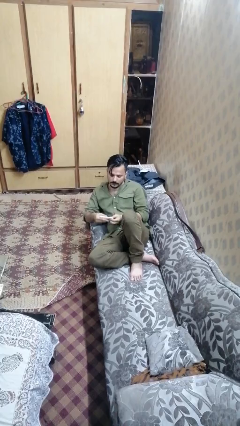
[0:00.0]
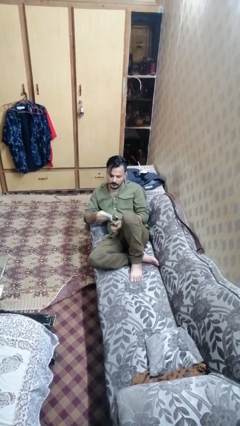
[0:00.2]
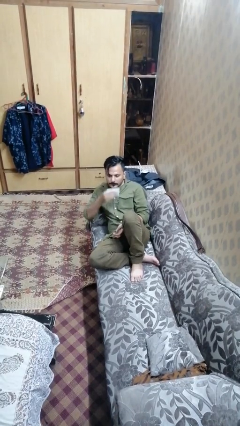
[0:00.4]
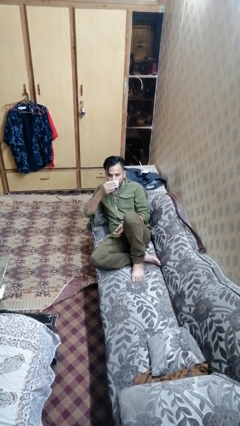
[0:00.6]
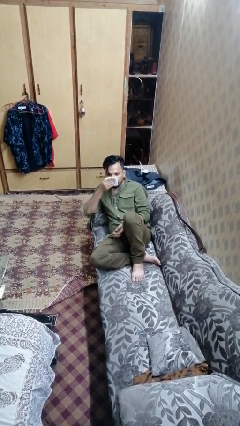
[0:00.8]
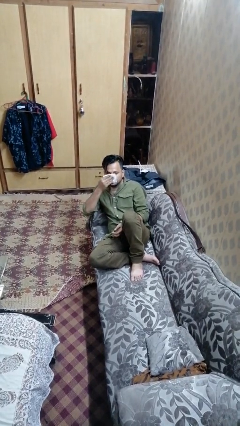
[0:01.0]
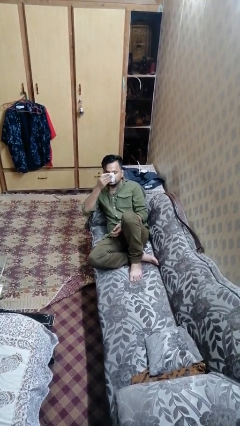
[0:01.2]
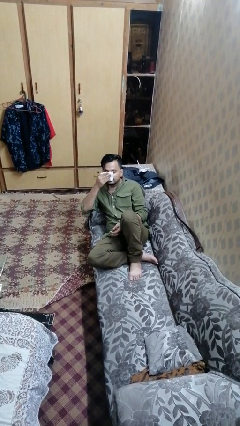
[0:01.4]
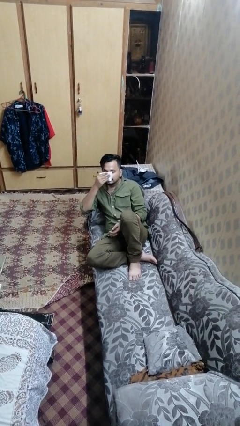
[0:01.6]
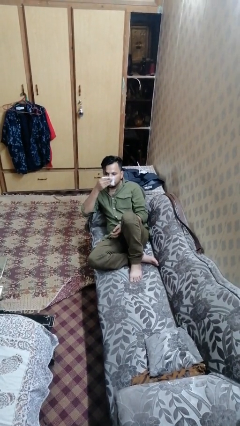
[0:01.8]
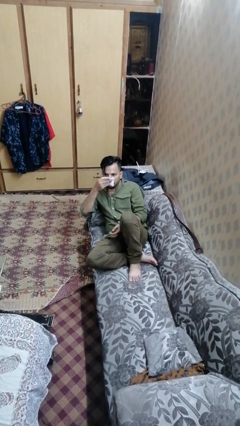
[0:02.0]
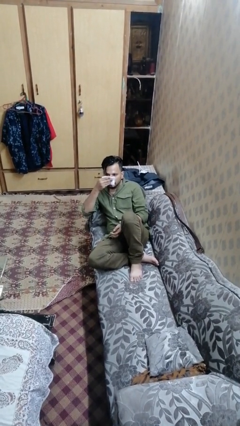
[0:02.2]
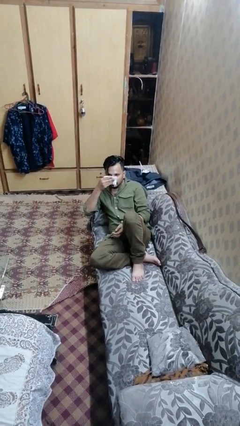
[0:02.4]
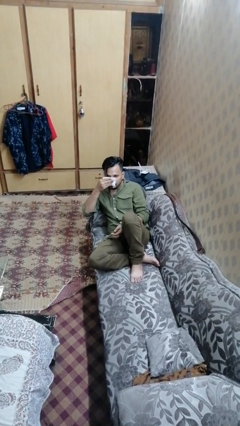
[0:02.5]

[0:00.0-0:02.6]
person blows nose

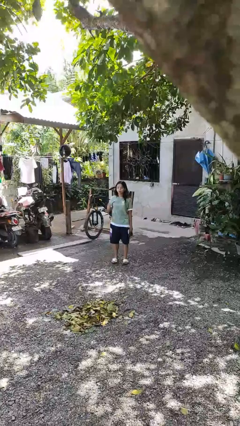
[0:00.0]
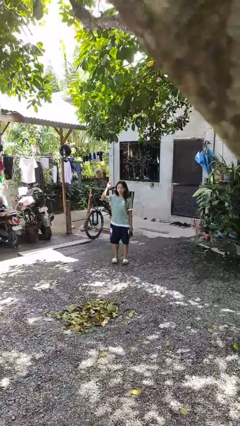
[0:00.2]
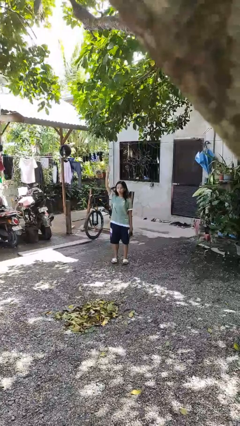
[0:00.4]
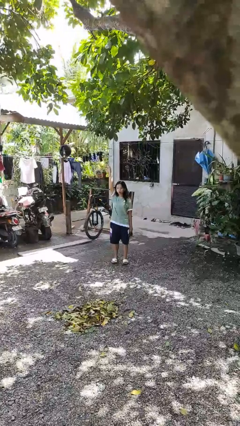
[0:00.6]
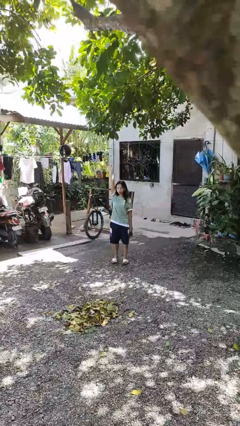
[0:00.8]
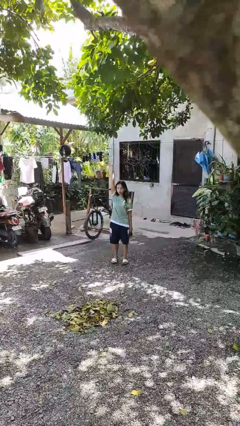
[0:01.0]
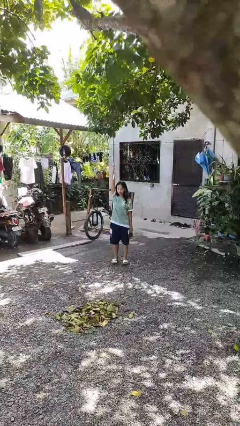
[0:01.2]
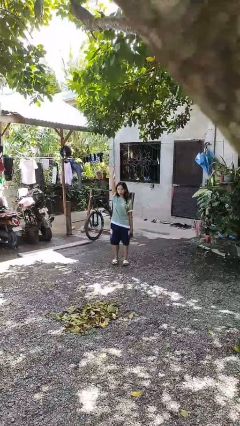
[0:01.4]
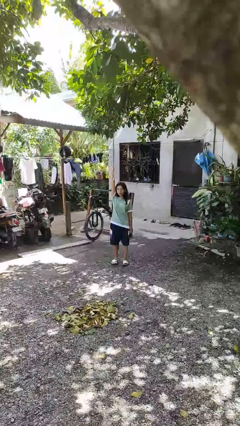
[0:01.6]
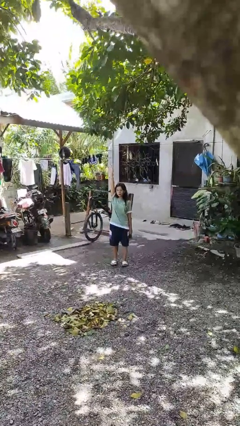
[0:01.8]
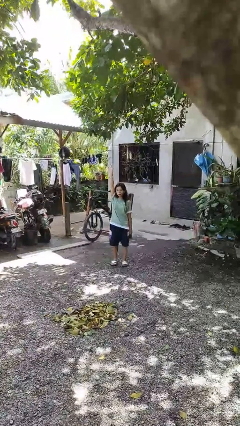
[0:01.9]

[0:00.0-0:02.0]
person gestures raise hand

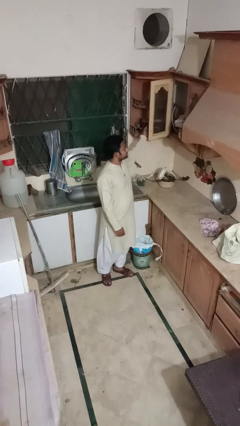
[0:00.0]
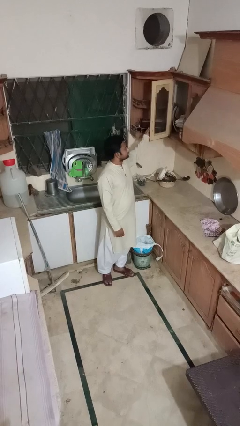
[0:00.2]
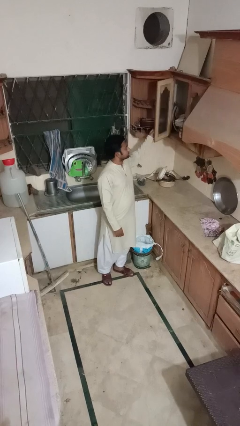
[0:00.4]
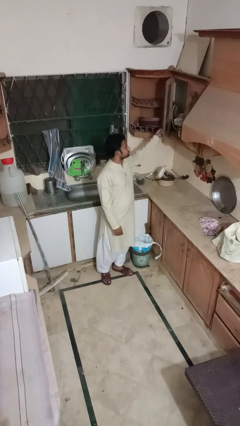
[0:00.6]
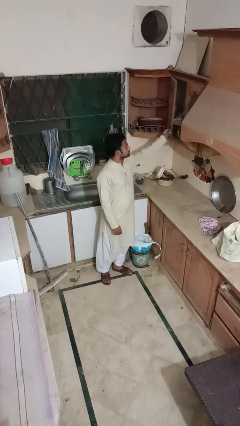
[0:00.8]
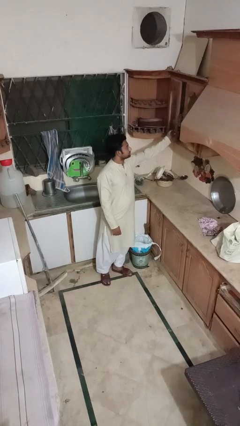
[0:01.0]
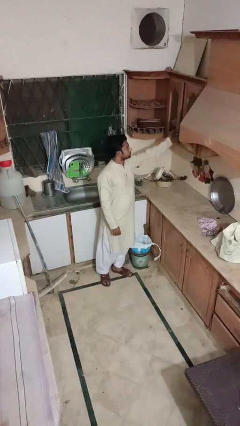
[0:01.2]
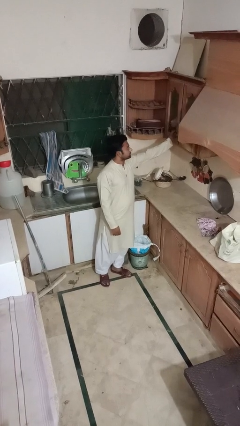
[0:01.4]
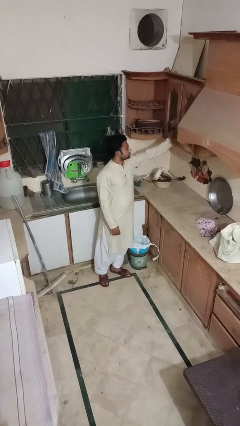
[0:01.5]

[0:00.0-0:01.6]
person closes cabinet

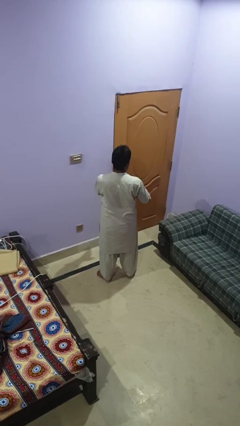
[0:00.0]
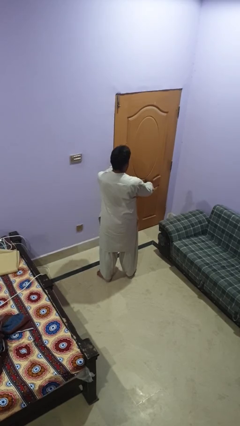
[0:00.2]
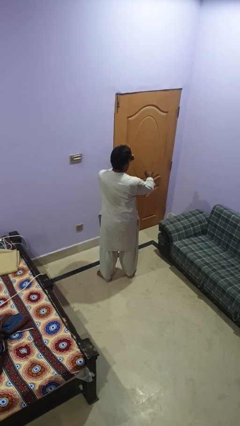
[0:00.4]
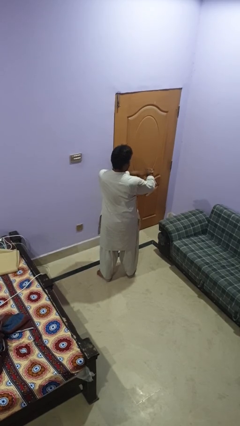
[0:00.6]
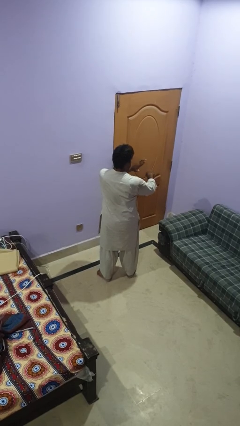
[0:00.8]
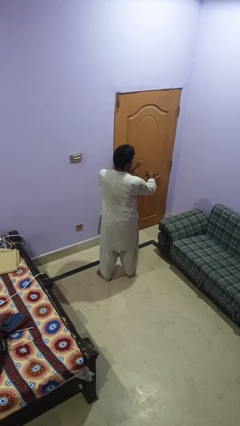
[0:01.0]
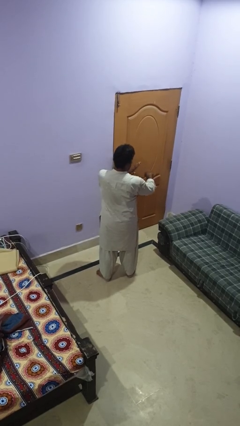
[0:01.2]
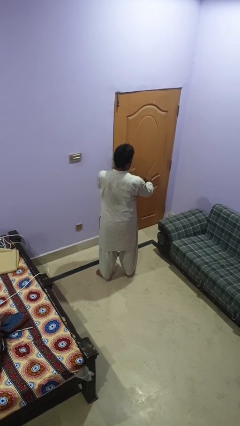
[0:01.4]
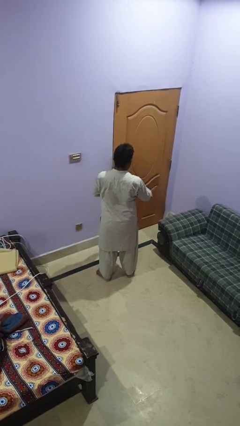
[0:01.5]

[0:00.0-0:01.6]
person swats bug

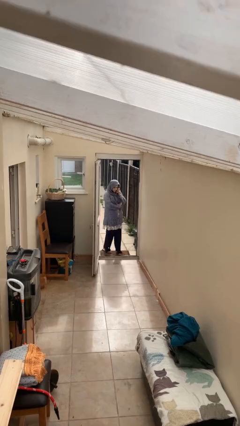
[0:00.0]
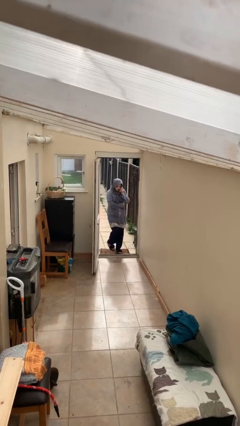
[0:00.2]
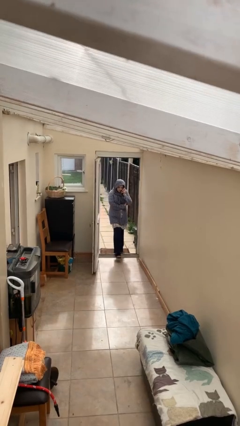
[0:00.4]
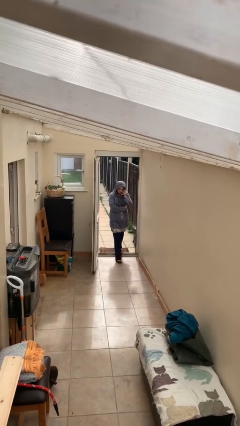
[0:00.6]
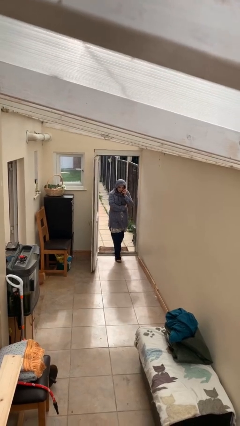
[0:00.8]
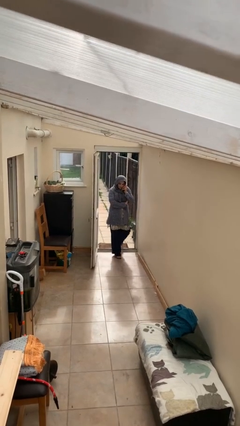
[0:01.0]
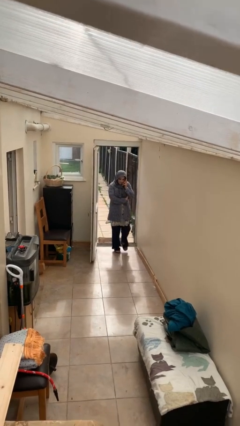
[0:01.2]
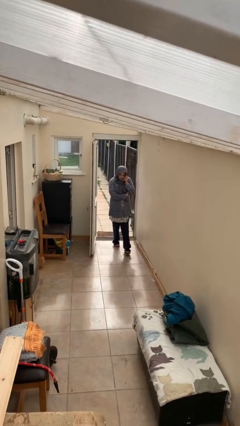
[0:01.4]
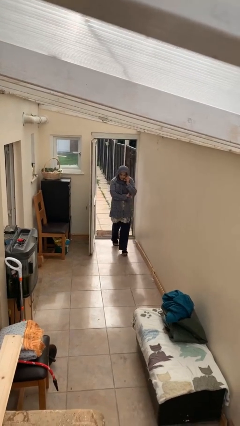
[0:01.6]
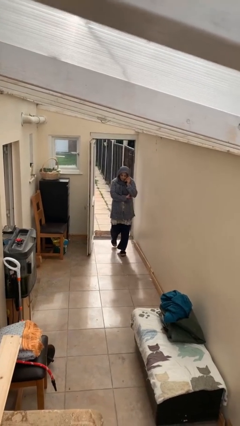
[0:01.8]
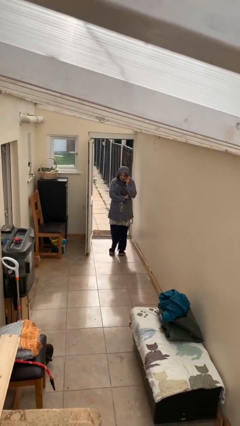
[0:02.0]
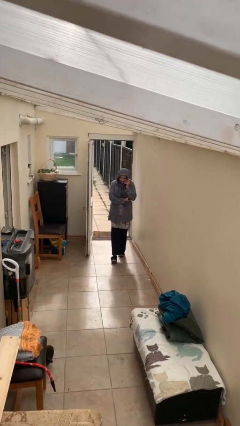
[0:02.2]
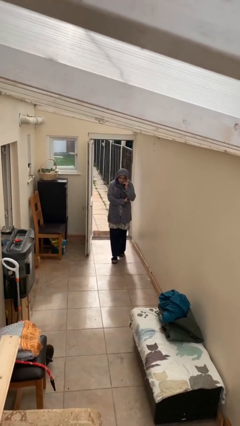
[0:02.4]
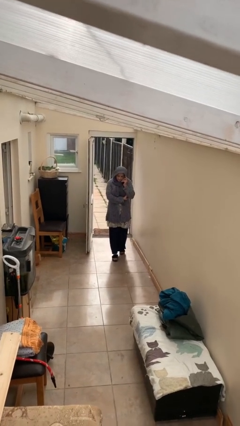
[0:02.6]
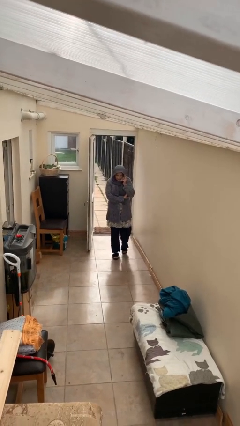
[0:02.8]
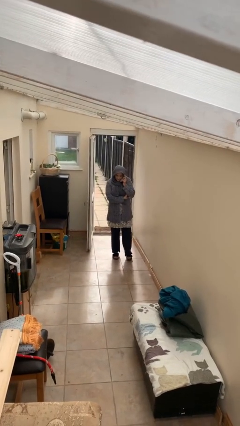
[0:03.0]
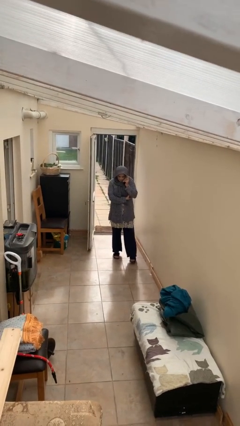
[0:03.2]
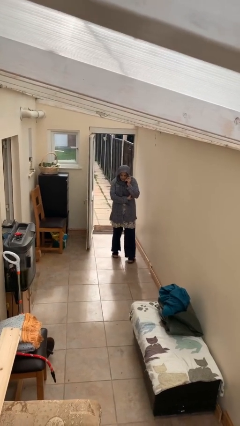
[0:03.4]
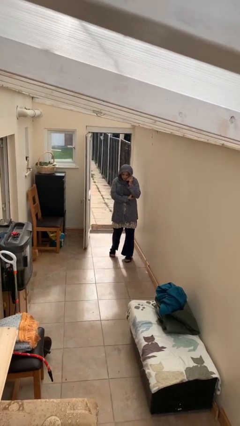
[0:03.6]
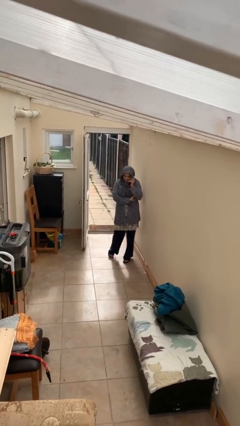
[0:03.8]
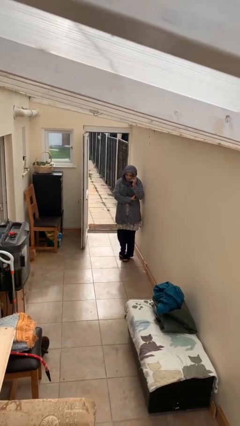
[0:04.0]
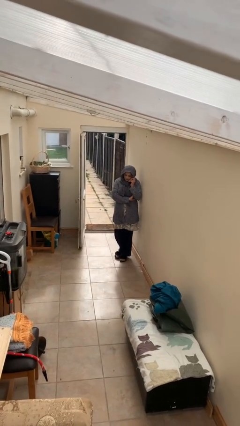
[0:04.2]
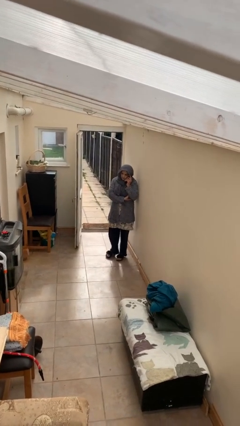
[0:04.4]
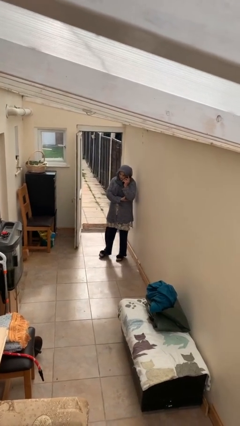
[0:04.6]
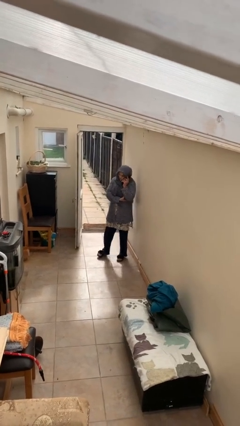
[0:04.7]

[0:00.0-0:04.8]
person enters scene through structure

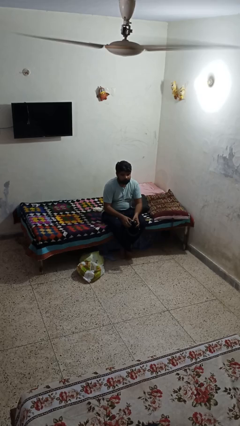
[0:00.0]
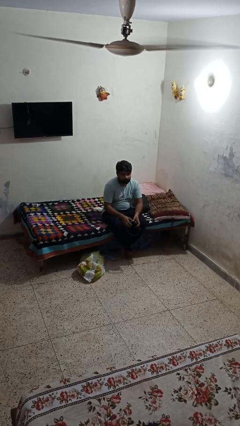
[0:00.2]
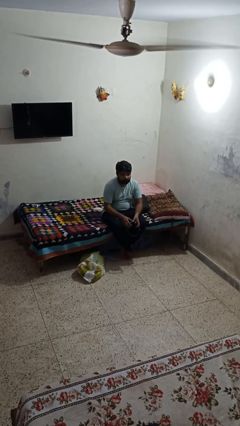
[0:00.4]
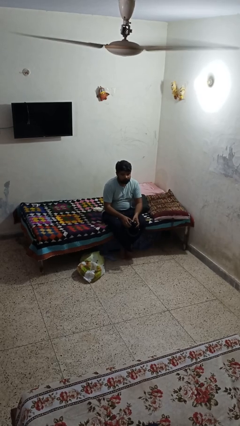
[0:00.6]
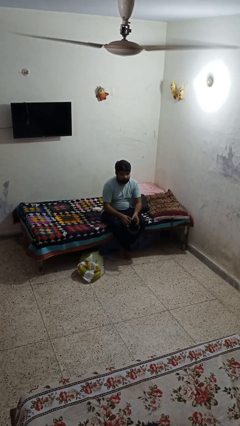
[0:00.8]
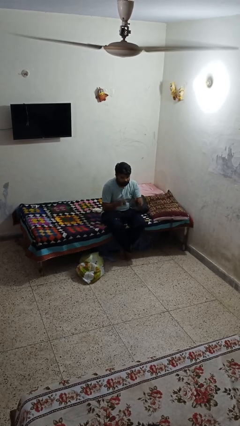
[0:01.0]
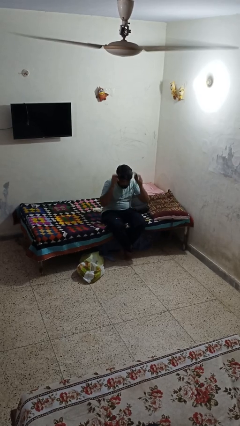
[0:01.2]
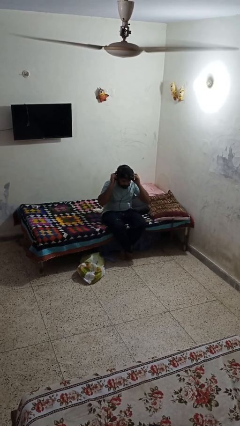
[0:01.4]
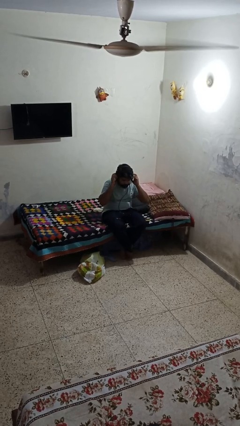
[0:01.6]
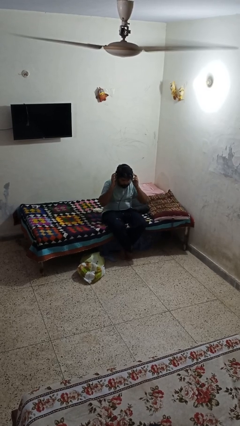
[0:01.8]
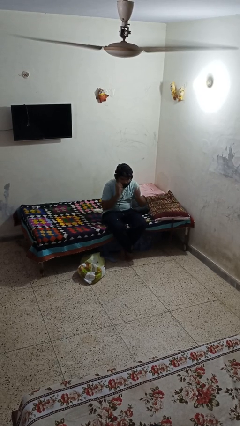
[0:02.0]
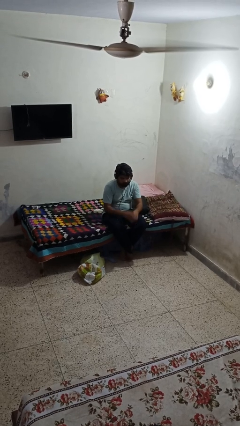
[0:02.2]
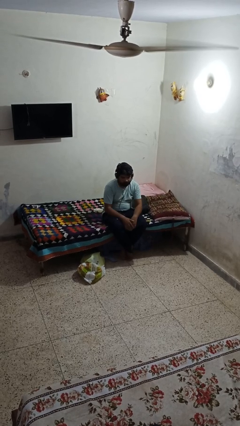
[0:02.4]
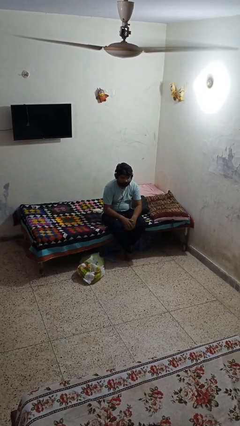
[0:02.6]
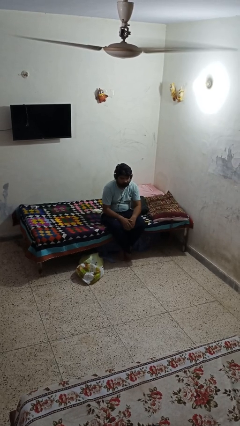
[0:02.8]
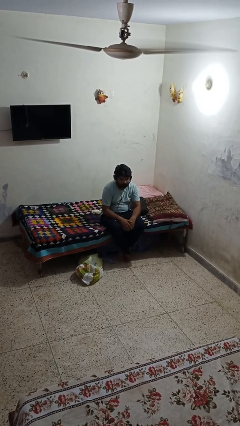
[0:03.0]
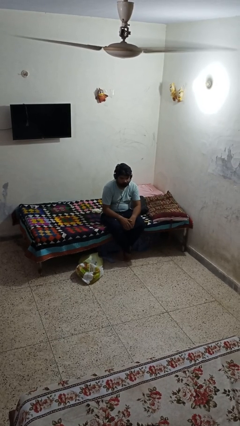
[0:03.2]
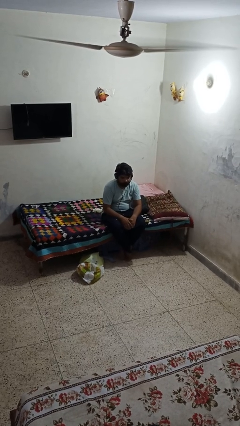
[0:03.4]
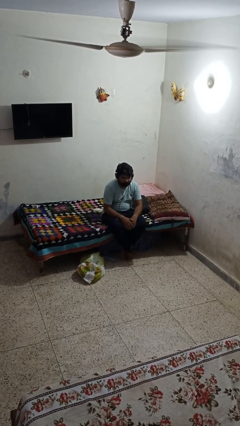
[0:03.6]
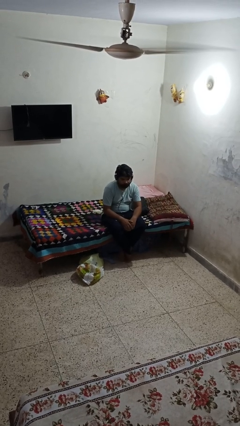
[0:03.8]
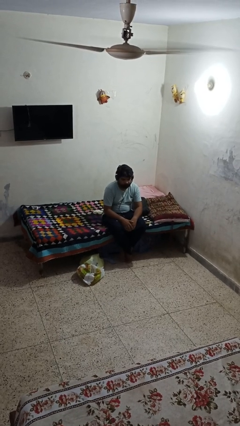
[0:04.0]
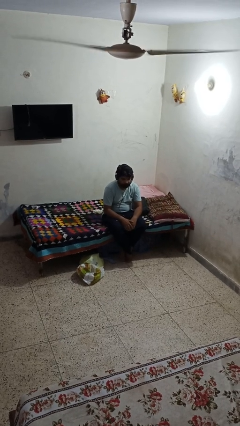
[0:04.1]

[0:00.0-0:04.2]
person puts on headphones

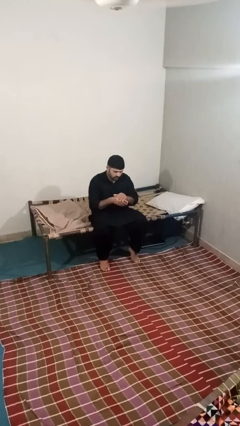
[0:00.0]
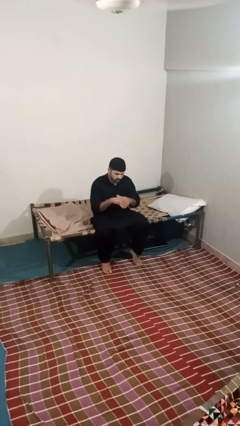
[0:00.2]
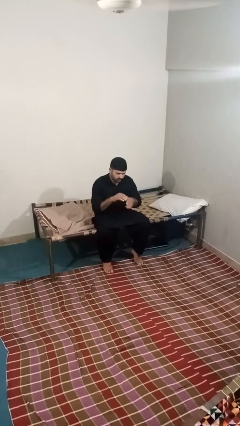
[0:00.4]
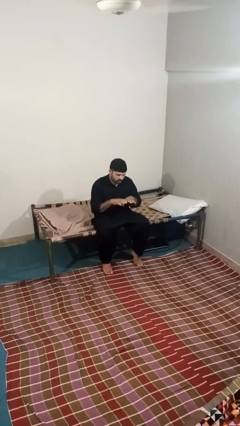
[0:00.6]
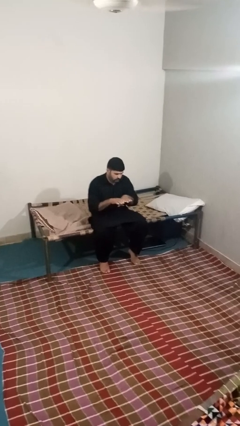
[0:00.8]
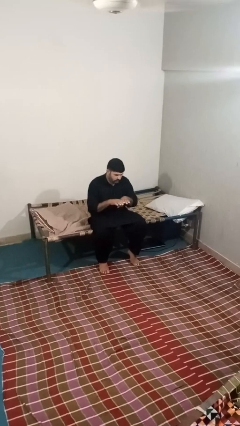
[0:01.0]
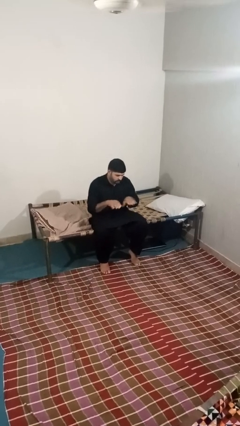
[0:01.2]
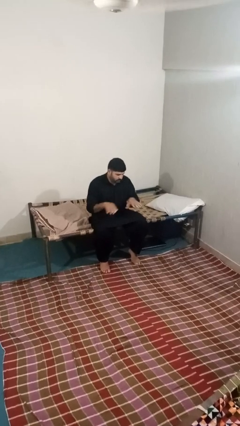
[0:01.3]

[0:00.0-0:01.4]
person looks at hands in lap
